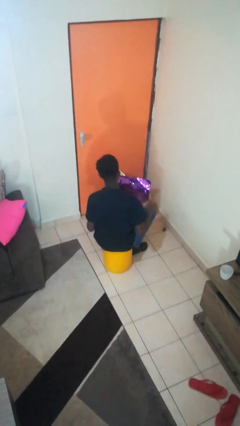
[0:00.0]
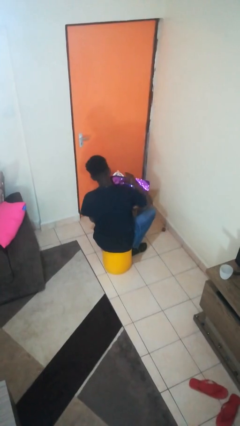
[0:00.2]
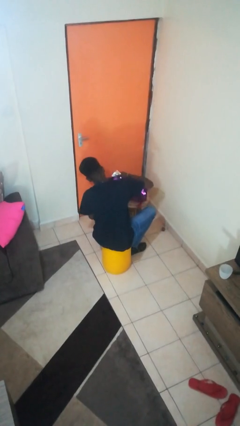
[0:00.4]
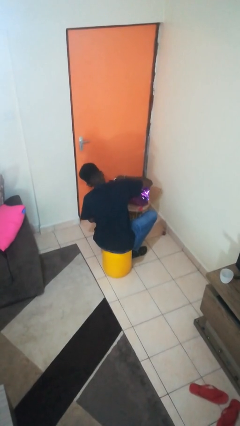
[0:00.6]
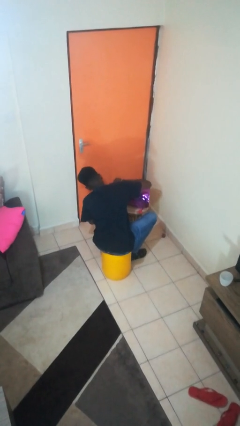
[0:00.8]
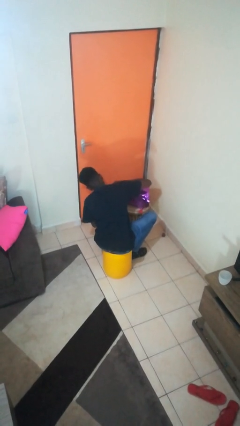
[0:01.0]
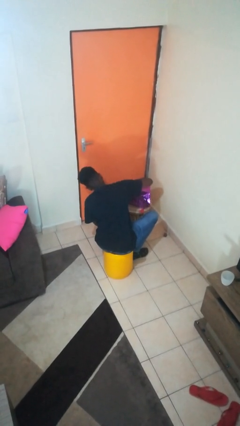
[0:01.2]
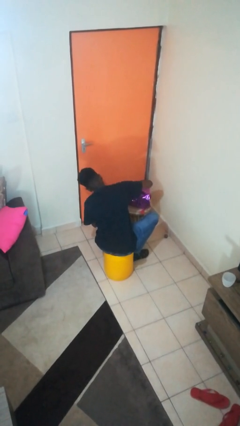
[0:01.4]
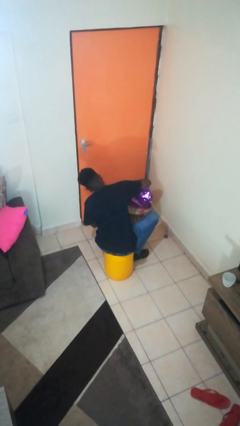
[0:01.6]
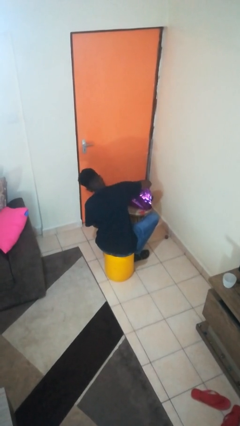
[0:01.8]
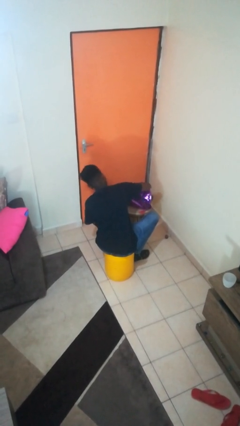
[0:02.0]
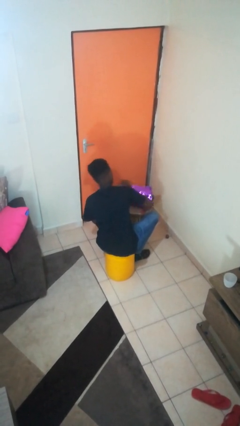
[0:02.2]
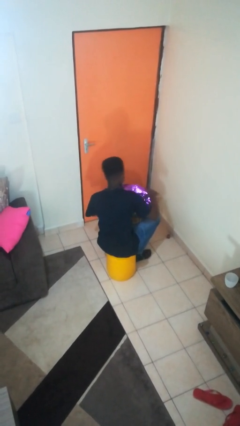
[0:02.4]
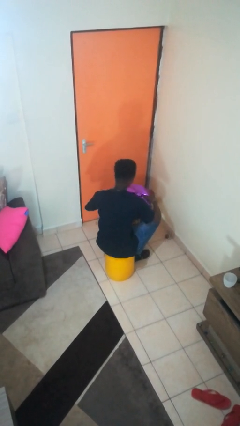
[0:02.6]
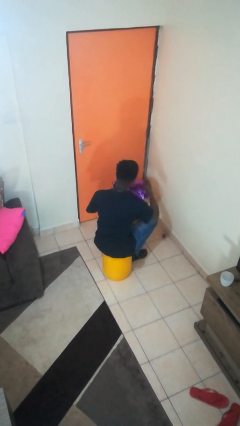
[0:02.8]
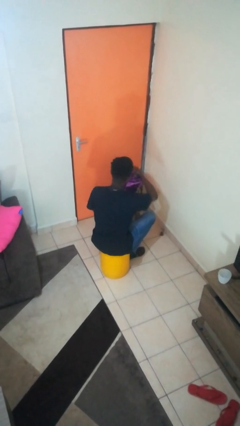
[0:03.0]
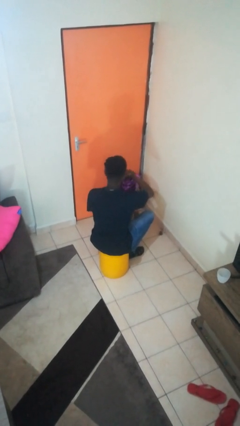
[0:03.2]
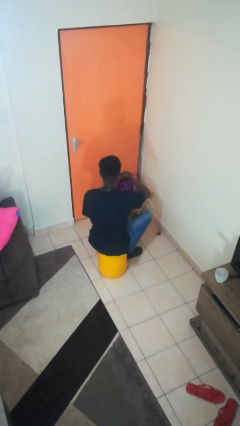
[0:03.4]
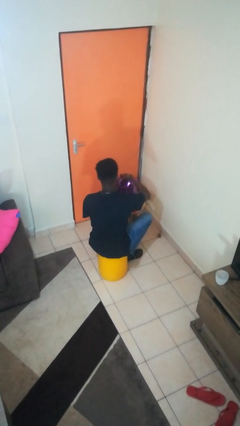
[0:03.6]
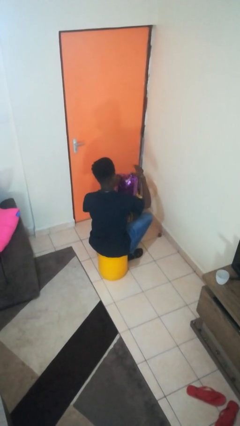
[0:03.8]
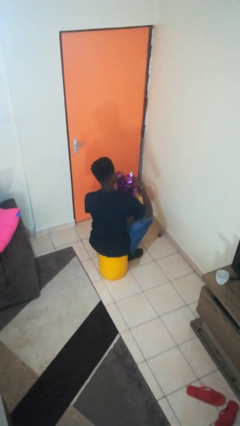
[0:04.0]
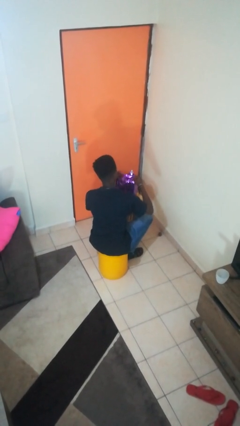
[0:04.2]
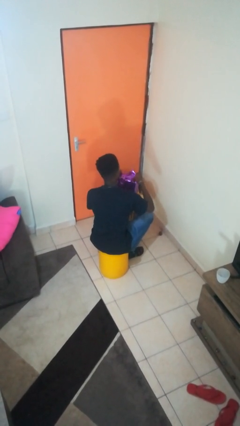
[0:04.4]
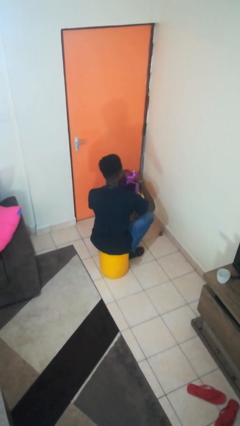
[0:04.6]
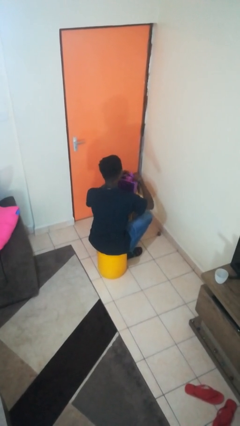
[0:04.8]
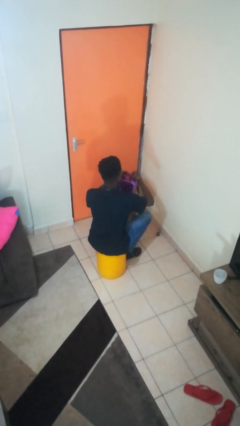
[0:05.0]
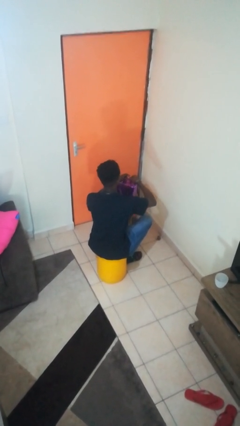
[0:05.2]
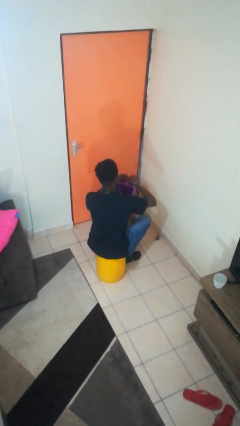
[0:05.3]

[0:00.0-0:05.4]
person wraps box

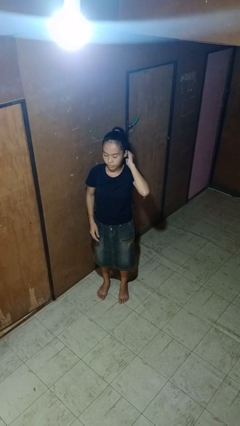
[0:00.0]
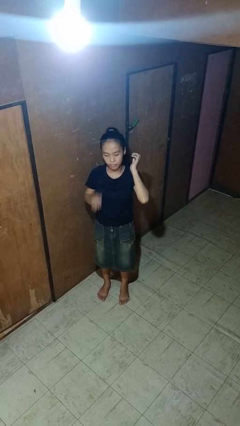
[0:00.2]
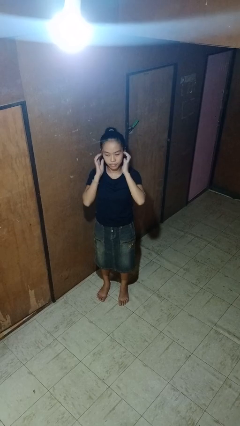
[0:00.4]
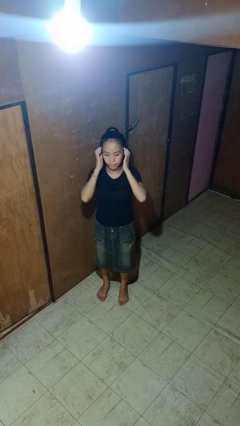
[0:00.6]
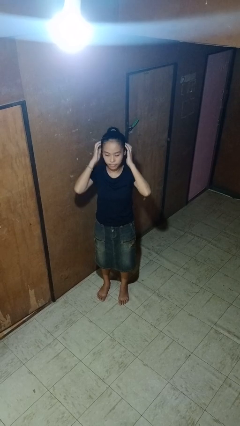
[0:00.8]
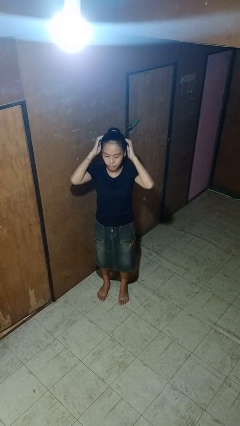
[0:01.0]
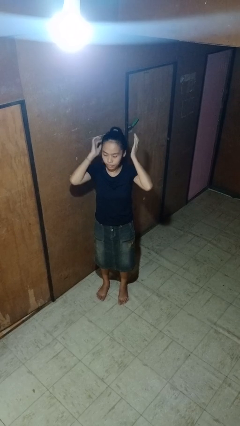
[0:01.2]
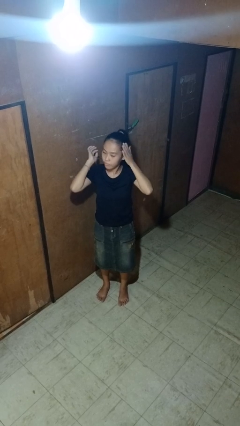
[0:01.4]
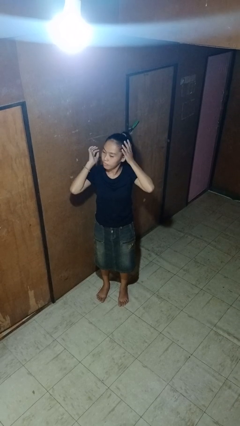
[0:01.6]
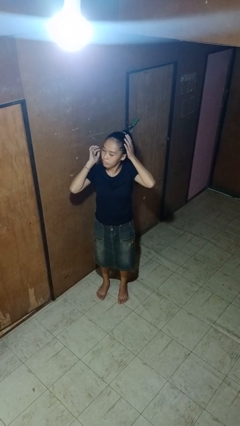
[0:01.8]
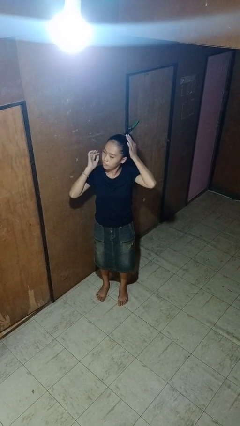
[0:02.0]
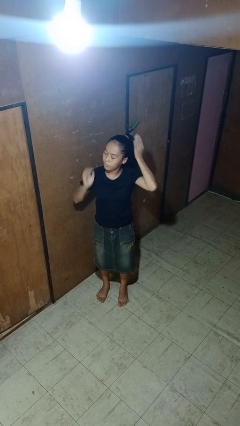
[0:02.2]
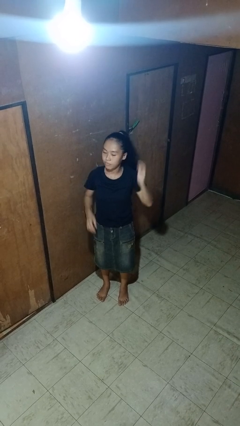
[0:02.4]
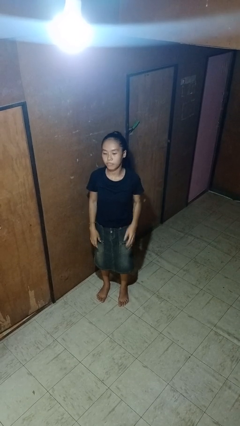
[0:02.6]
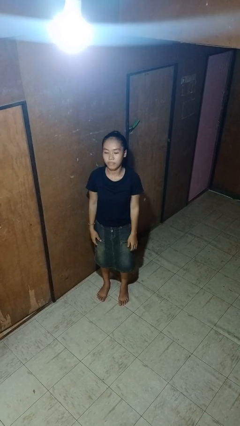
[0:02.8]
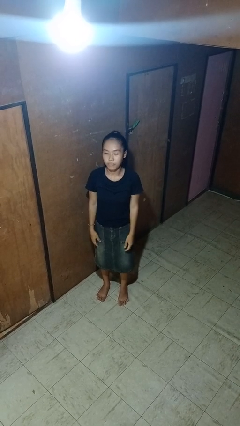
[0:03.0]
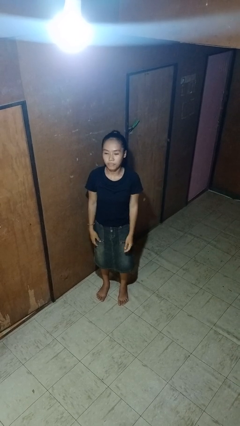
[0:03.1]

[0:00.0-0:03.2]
person strokes hair

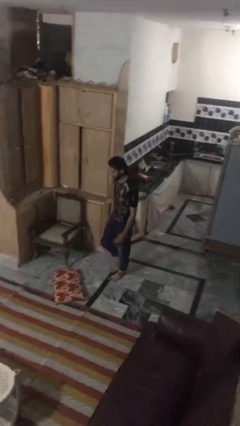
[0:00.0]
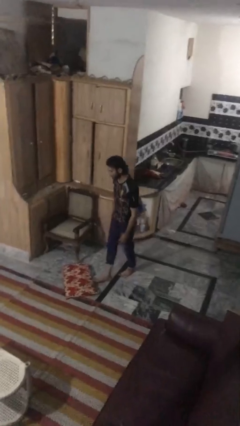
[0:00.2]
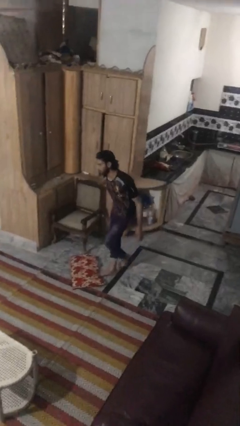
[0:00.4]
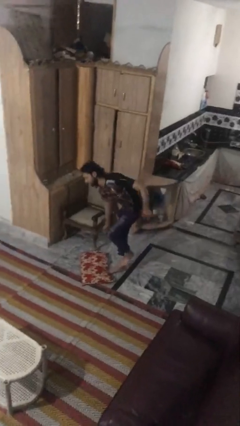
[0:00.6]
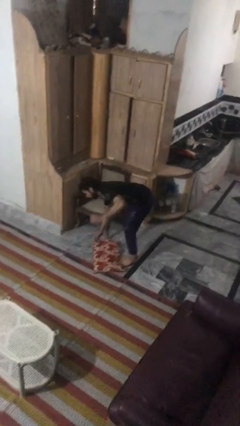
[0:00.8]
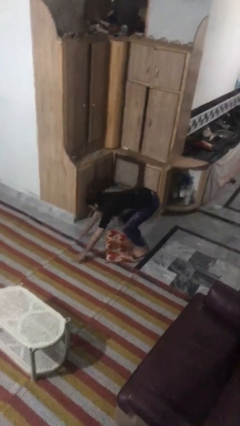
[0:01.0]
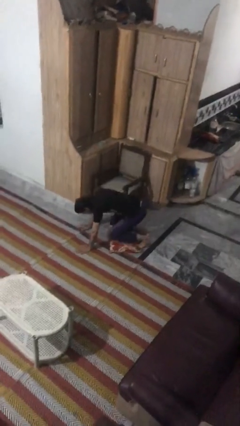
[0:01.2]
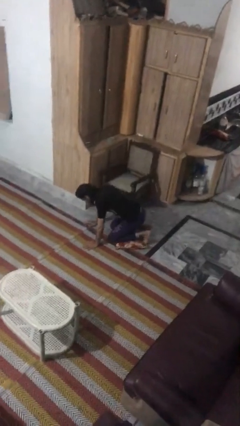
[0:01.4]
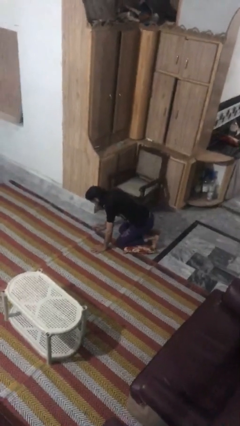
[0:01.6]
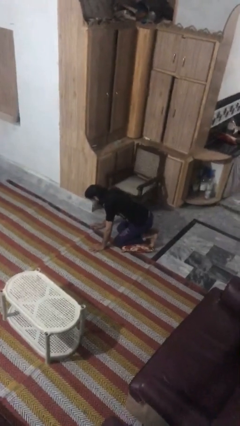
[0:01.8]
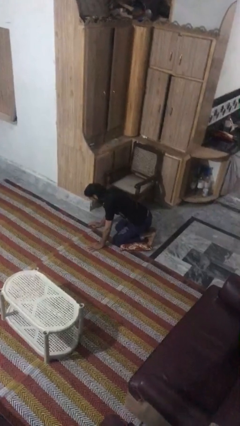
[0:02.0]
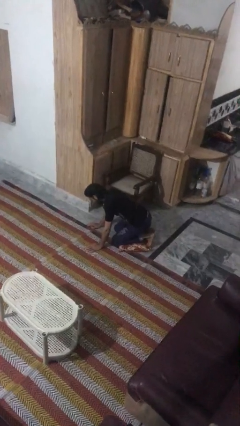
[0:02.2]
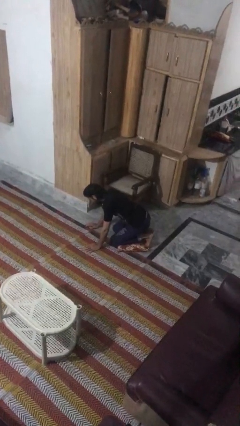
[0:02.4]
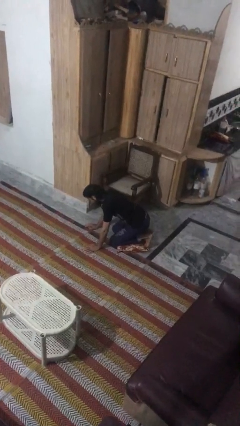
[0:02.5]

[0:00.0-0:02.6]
person trips on object on floor

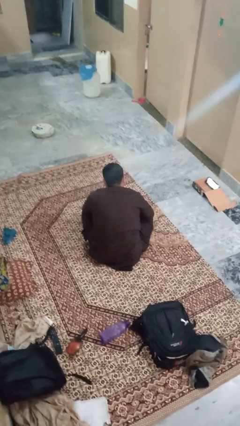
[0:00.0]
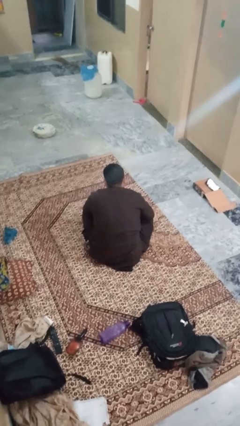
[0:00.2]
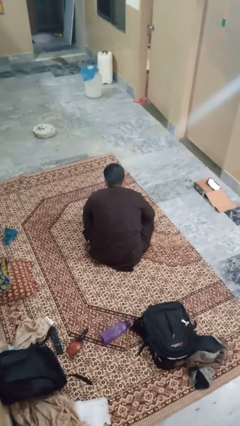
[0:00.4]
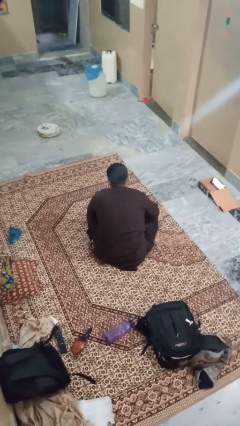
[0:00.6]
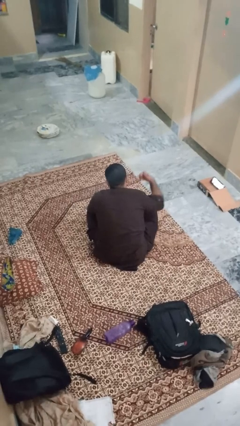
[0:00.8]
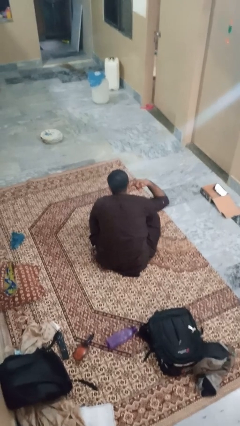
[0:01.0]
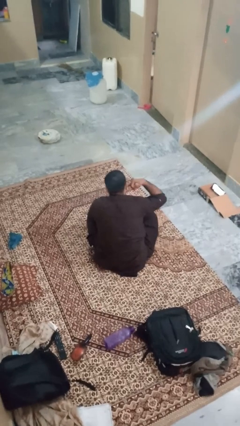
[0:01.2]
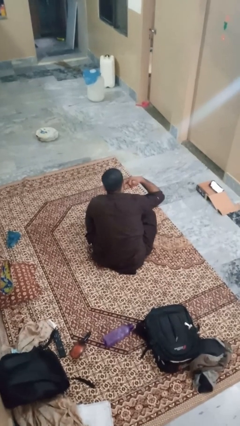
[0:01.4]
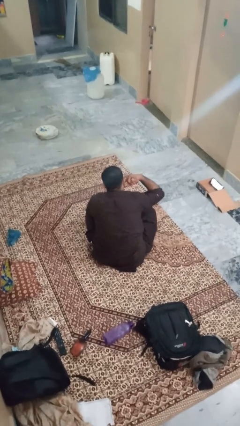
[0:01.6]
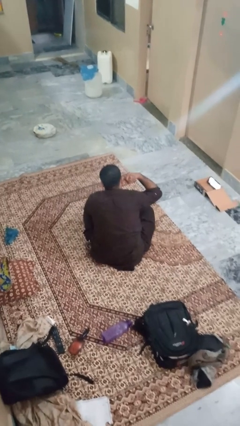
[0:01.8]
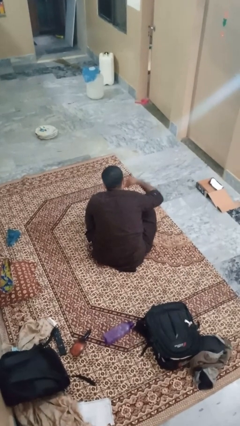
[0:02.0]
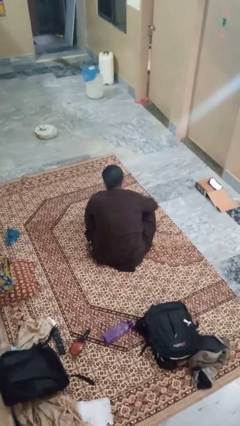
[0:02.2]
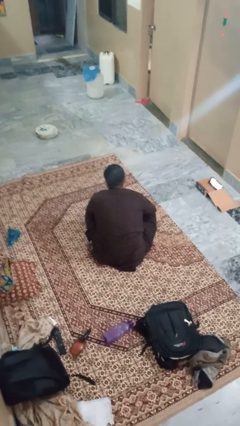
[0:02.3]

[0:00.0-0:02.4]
person gestures call me

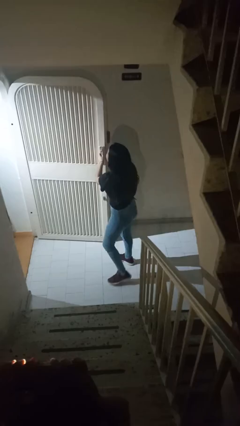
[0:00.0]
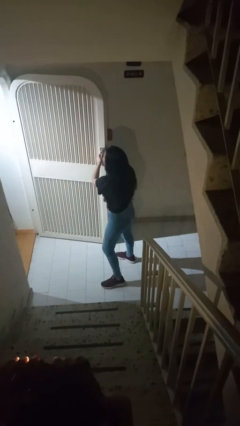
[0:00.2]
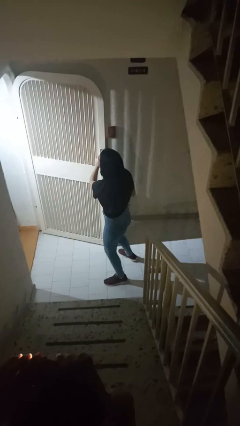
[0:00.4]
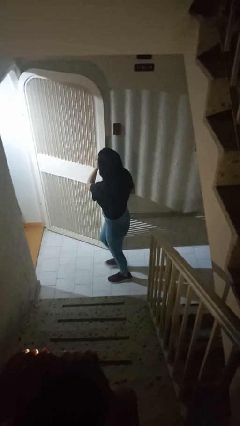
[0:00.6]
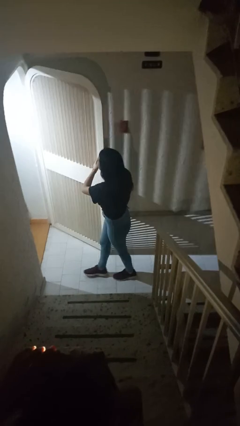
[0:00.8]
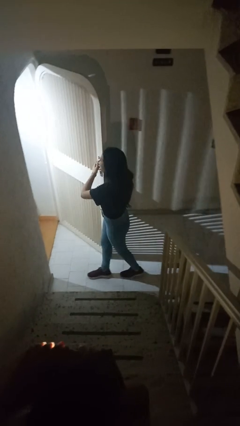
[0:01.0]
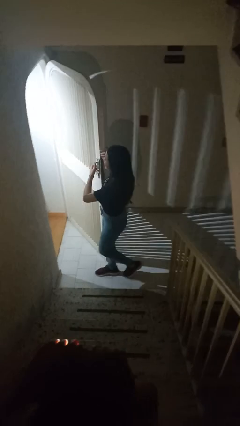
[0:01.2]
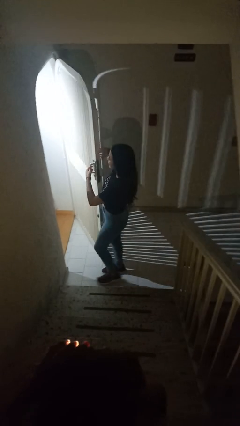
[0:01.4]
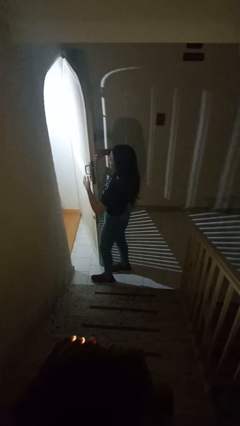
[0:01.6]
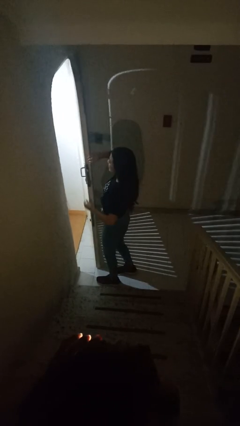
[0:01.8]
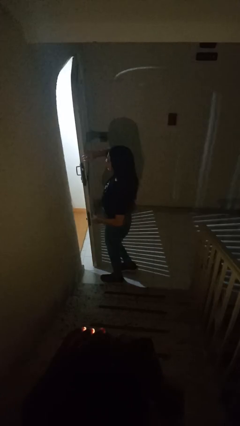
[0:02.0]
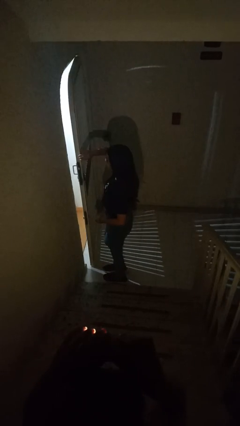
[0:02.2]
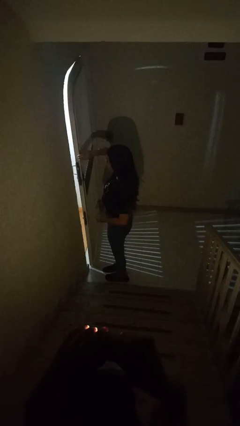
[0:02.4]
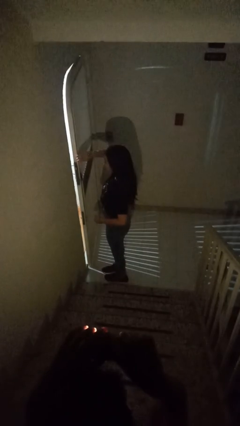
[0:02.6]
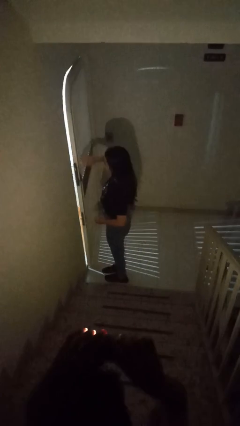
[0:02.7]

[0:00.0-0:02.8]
person closes facility door

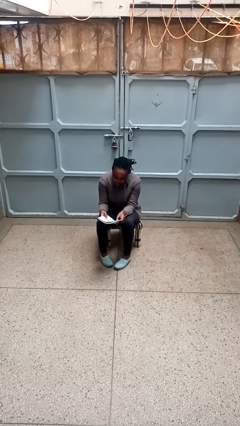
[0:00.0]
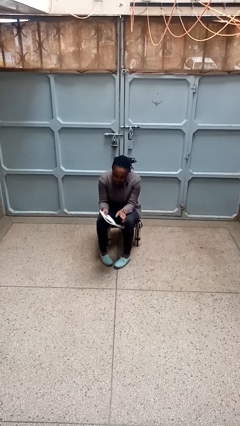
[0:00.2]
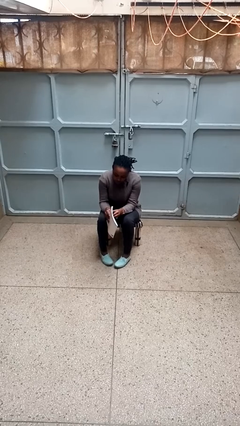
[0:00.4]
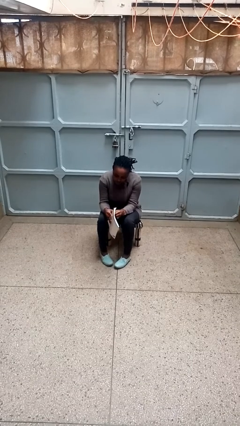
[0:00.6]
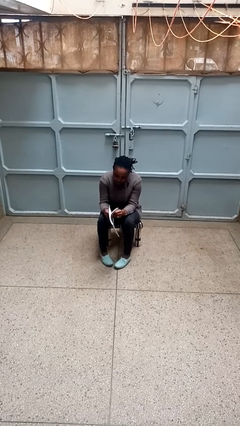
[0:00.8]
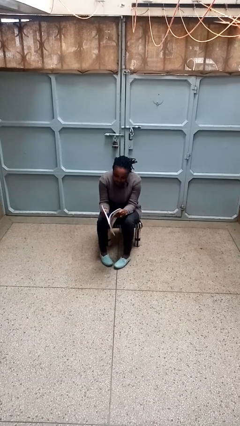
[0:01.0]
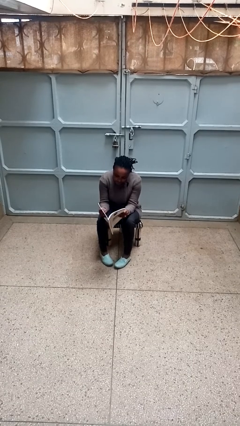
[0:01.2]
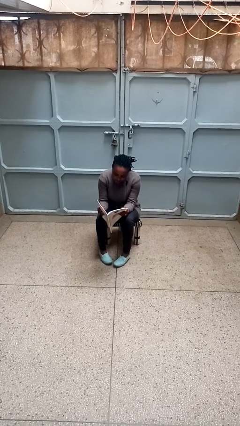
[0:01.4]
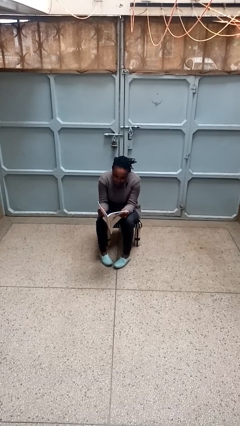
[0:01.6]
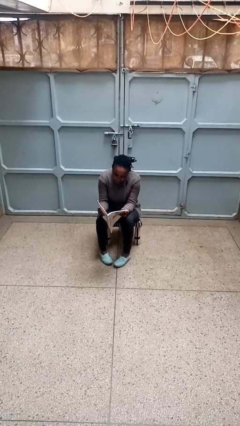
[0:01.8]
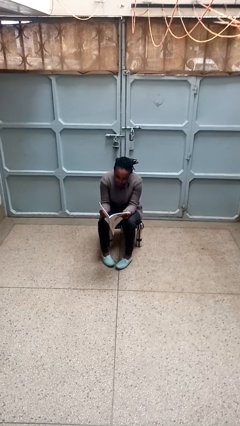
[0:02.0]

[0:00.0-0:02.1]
person reads magazine
